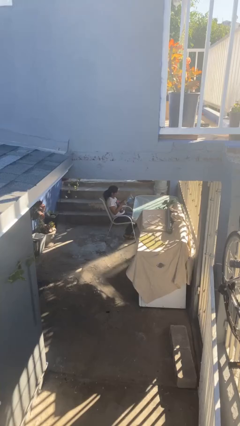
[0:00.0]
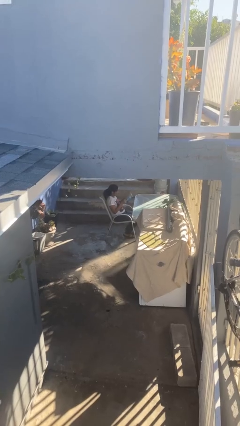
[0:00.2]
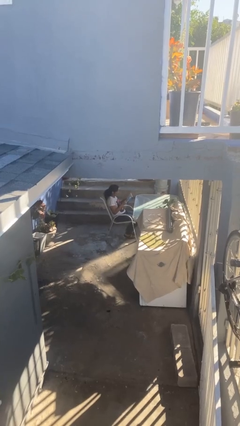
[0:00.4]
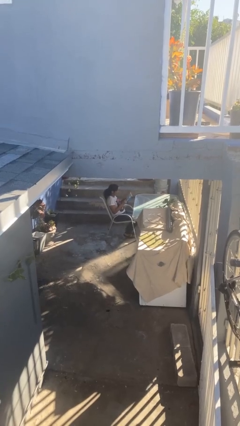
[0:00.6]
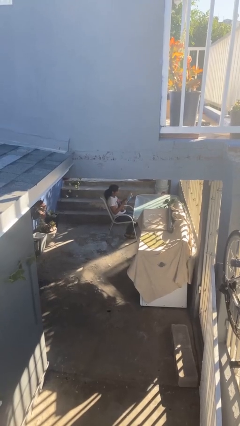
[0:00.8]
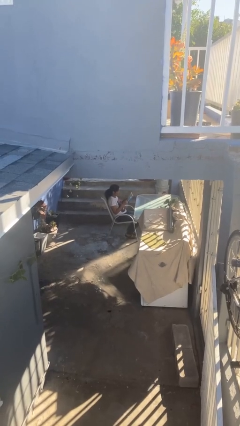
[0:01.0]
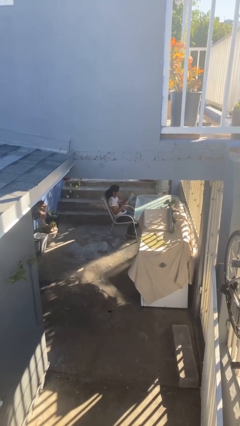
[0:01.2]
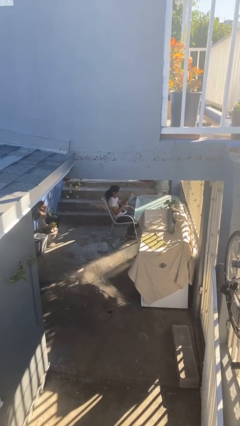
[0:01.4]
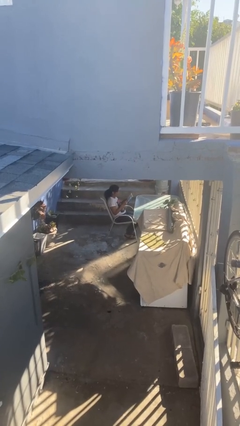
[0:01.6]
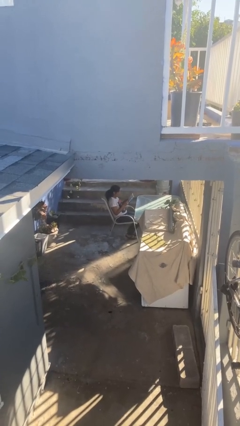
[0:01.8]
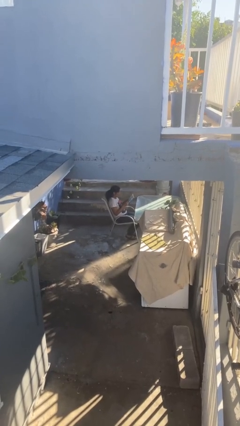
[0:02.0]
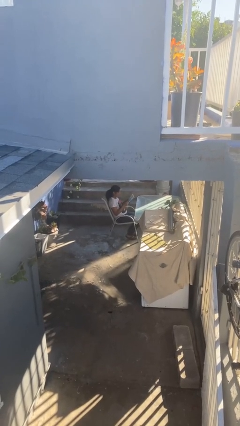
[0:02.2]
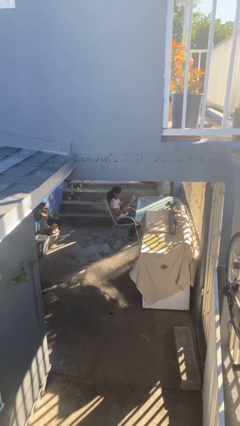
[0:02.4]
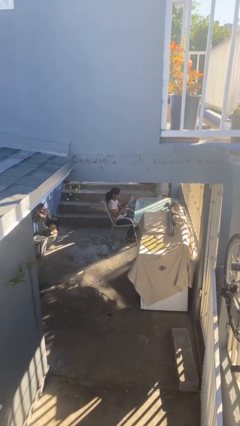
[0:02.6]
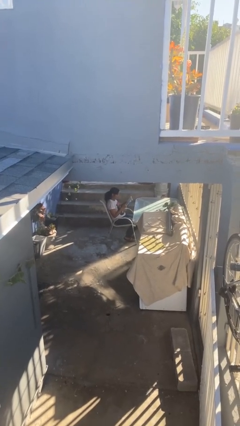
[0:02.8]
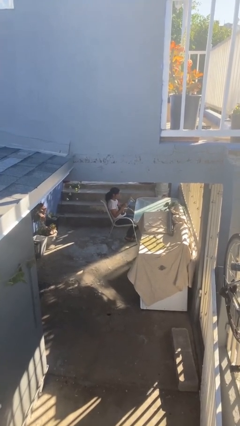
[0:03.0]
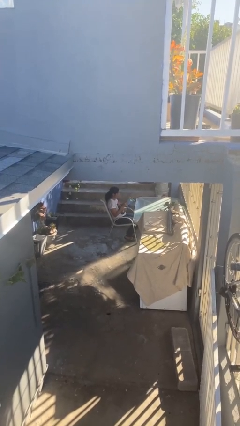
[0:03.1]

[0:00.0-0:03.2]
person reads document

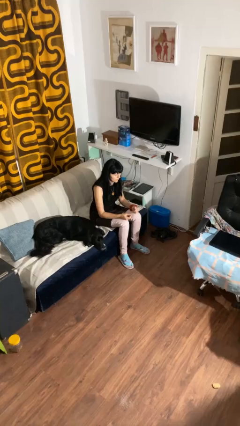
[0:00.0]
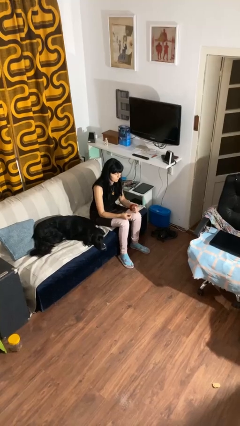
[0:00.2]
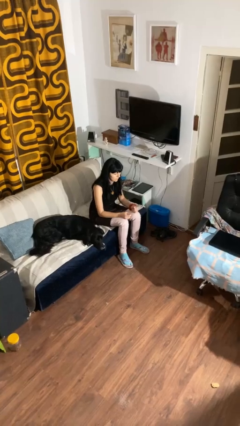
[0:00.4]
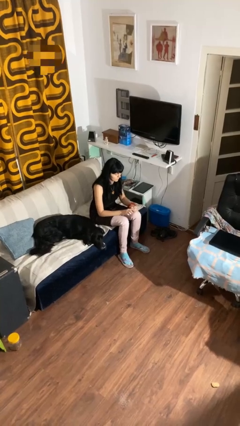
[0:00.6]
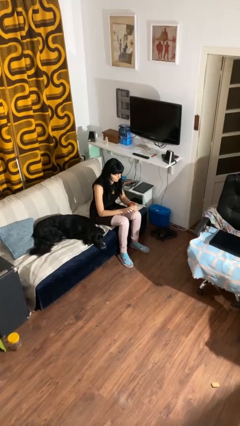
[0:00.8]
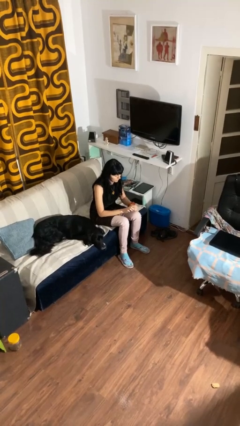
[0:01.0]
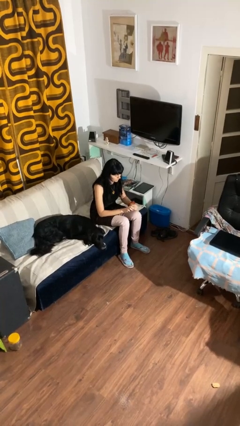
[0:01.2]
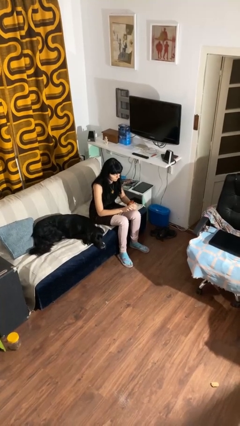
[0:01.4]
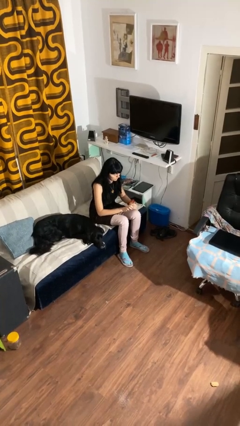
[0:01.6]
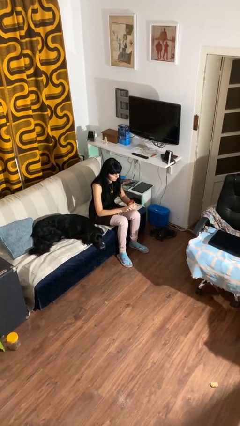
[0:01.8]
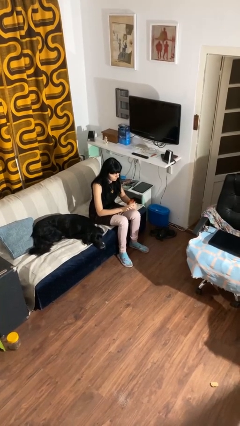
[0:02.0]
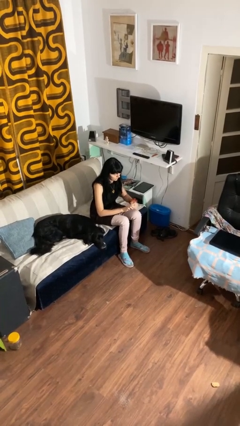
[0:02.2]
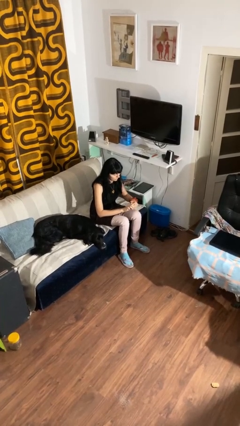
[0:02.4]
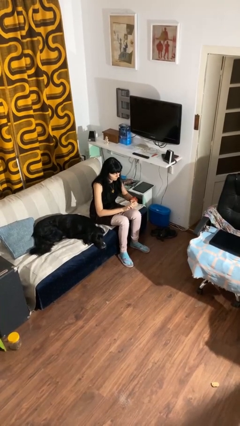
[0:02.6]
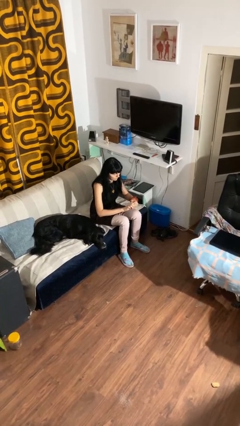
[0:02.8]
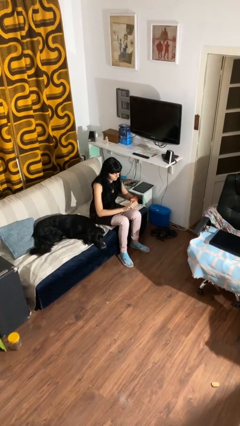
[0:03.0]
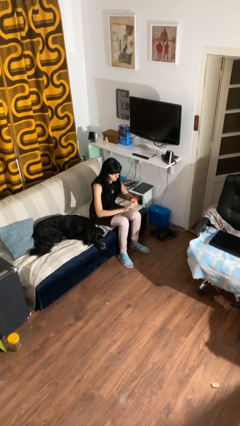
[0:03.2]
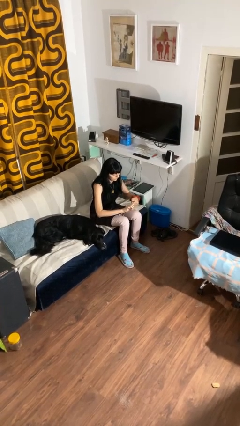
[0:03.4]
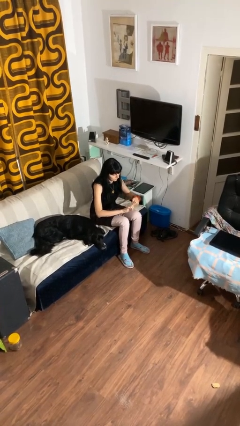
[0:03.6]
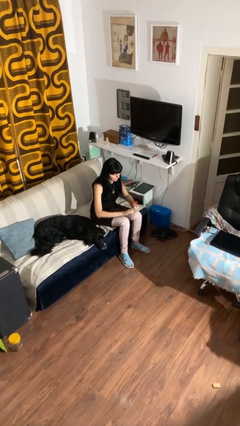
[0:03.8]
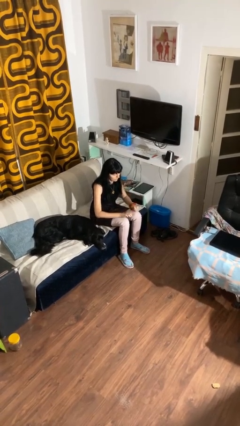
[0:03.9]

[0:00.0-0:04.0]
person clips fingernails

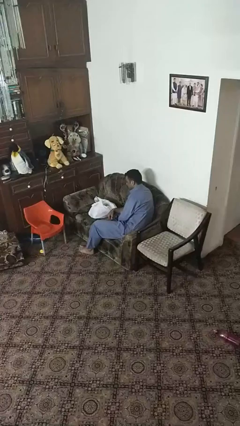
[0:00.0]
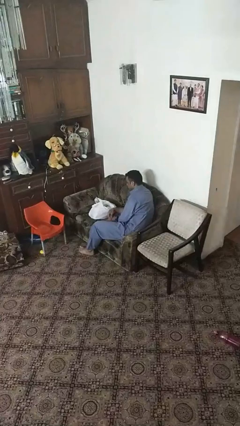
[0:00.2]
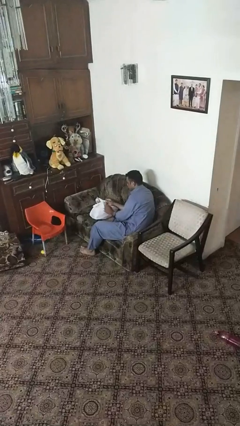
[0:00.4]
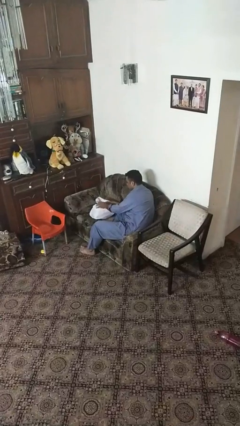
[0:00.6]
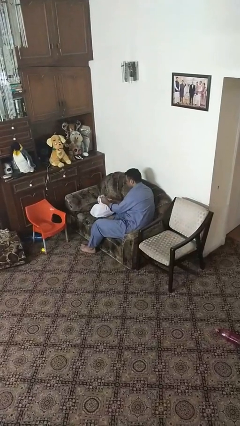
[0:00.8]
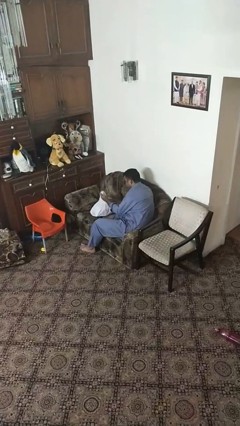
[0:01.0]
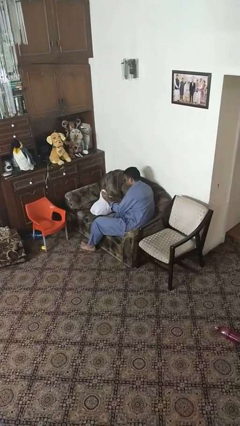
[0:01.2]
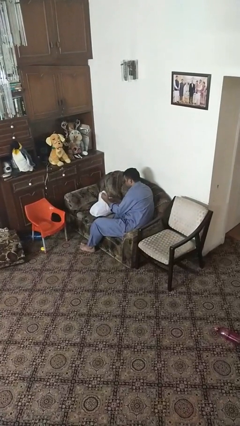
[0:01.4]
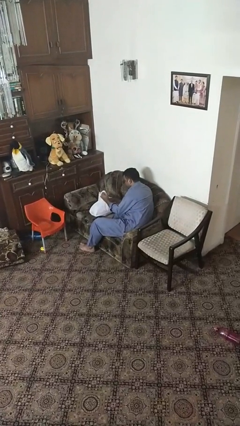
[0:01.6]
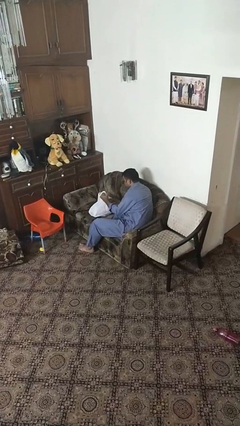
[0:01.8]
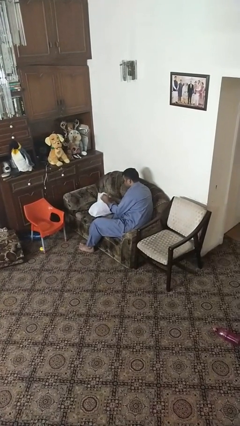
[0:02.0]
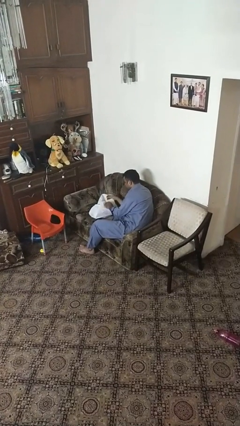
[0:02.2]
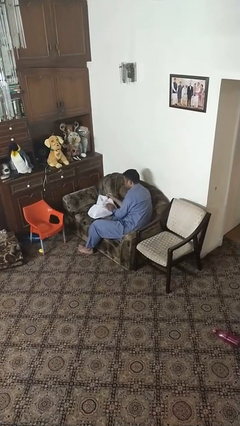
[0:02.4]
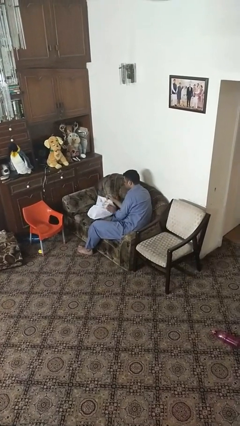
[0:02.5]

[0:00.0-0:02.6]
person searches in bag

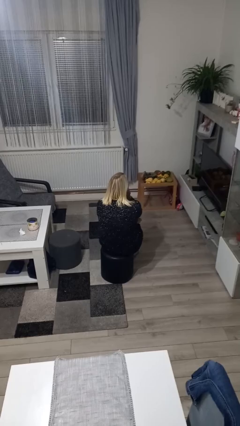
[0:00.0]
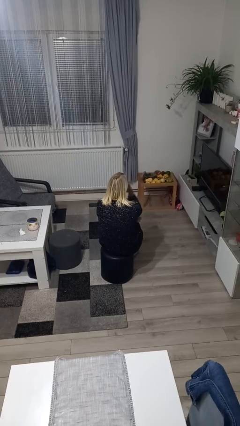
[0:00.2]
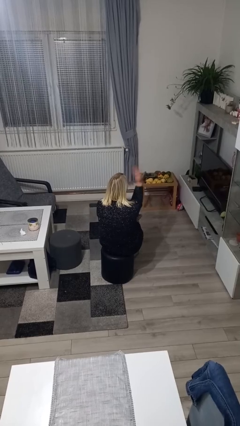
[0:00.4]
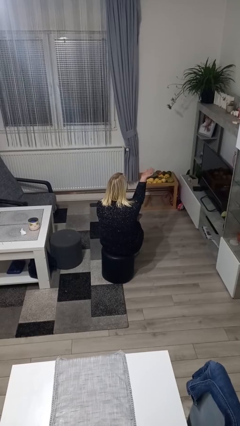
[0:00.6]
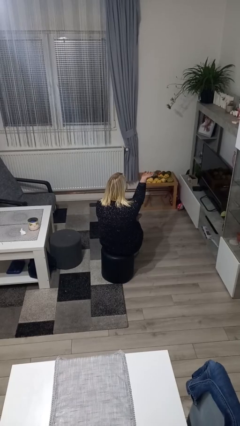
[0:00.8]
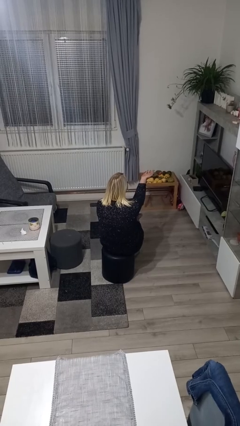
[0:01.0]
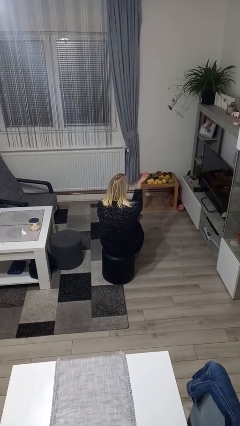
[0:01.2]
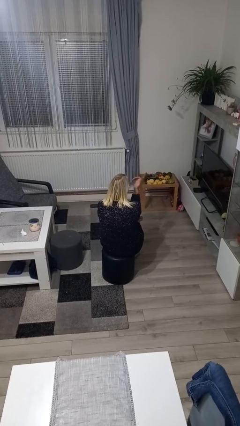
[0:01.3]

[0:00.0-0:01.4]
person gestures blow kiss

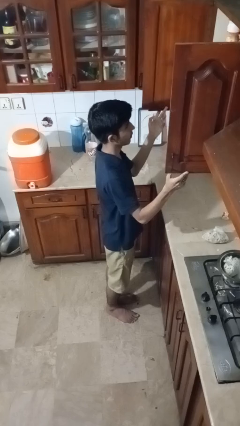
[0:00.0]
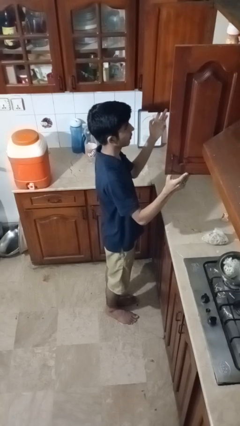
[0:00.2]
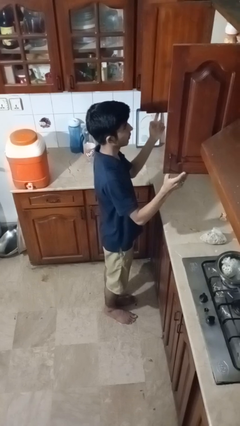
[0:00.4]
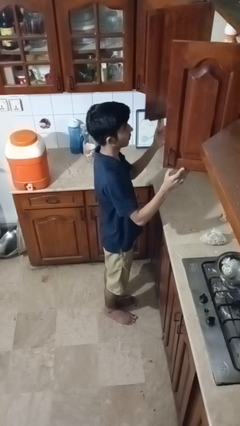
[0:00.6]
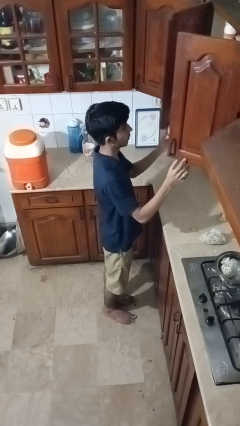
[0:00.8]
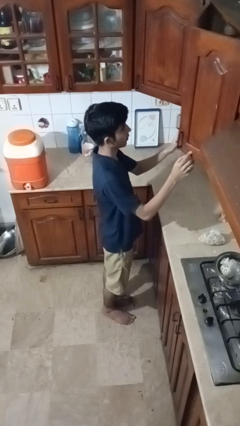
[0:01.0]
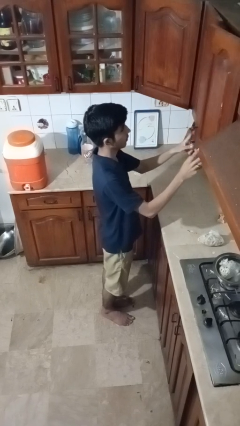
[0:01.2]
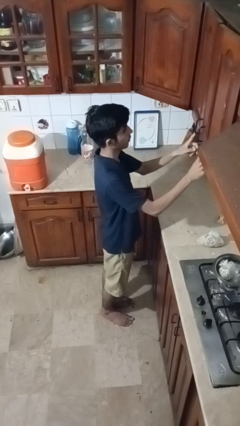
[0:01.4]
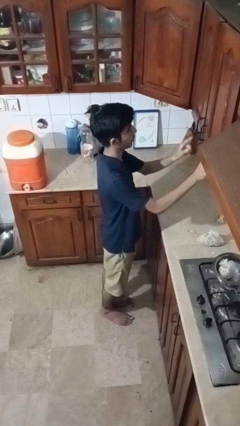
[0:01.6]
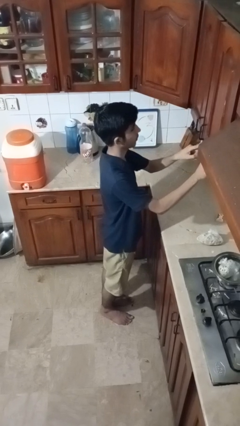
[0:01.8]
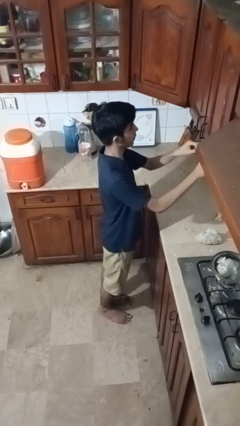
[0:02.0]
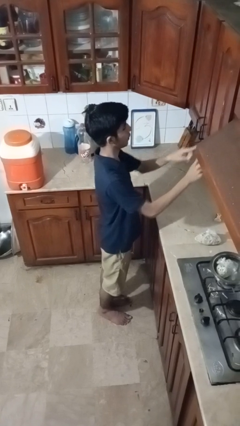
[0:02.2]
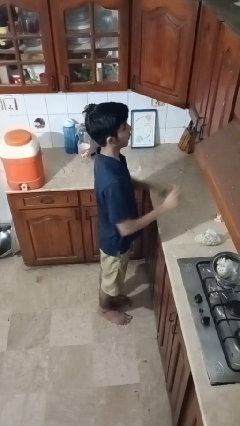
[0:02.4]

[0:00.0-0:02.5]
person closes cabinet

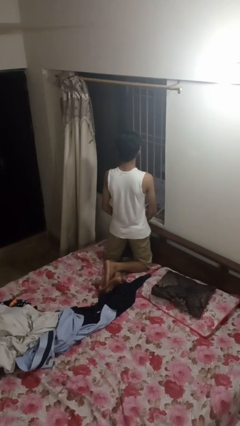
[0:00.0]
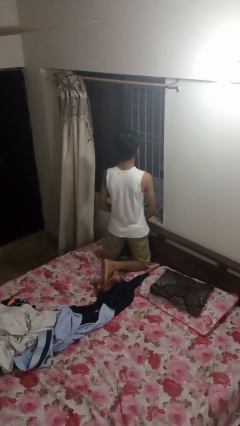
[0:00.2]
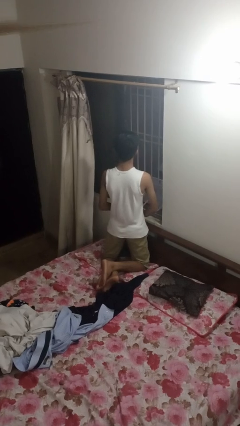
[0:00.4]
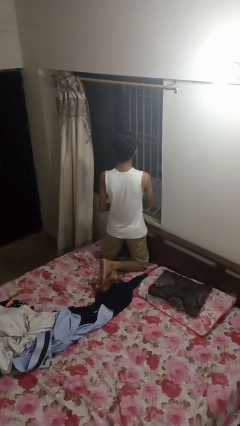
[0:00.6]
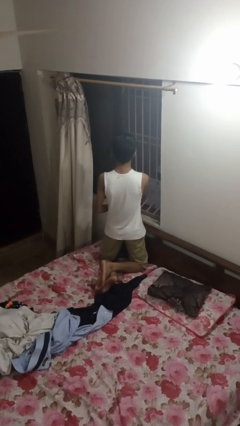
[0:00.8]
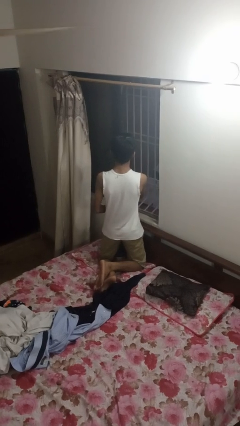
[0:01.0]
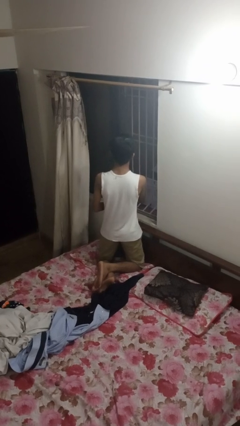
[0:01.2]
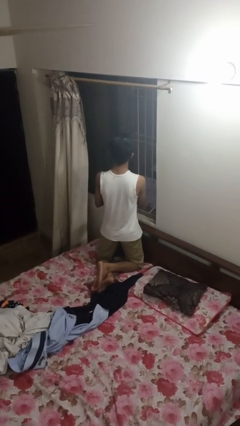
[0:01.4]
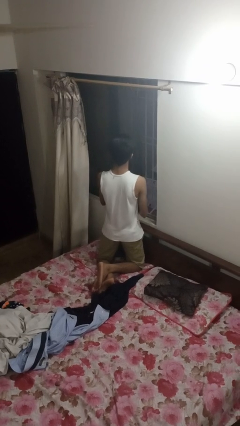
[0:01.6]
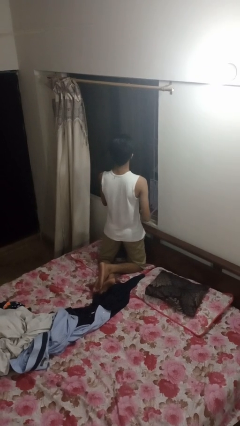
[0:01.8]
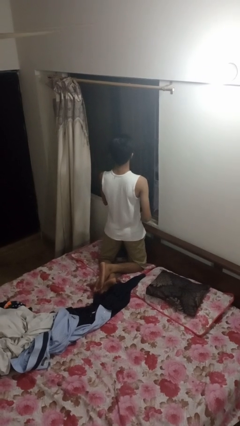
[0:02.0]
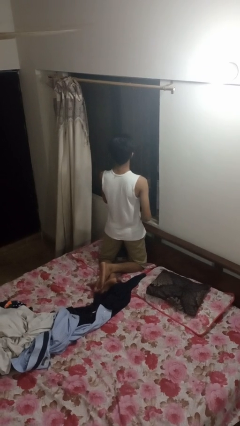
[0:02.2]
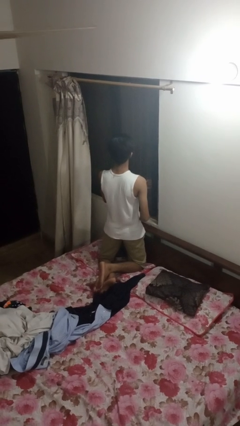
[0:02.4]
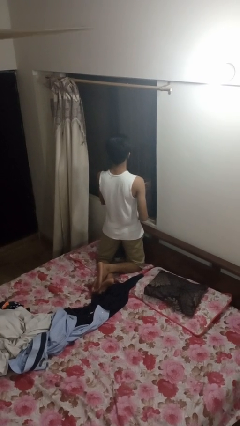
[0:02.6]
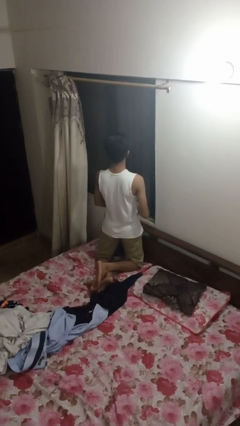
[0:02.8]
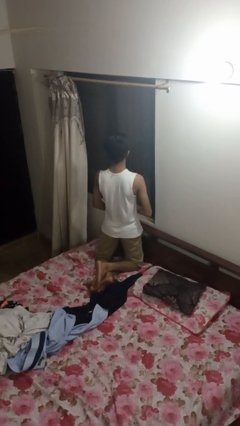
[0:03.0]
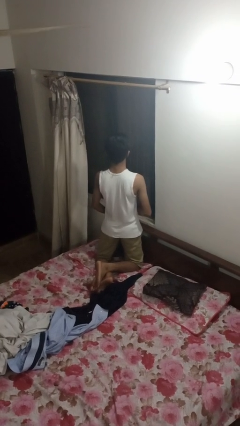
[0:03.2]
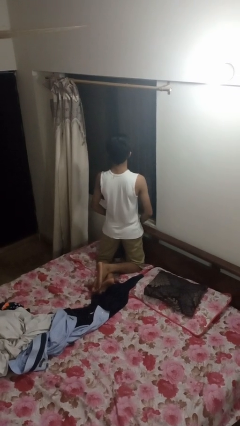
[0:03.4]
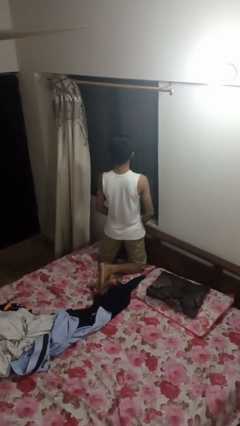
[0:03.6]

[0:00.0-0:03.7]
person closes home window

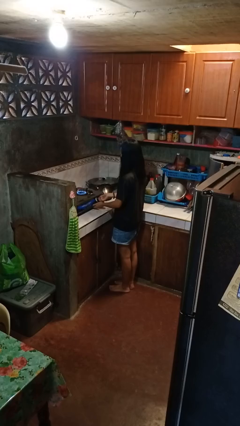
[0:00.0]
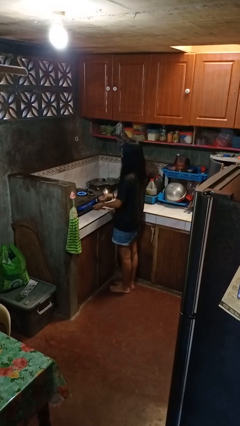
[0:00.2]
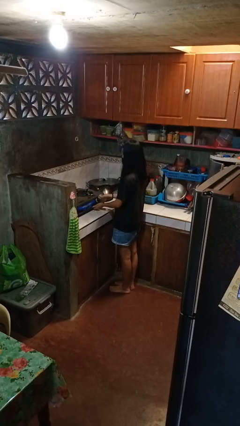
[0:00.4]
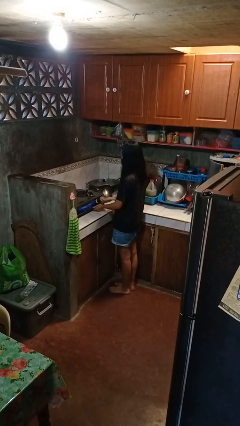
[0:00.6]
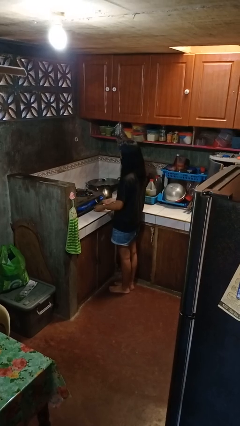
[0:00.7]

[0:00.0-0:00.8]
person turns off stovetop
